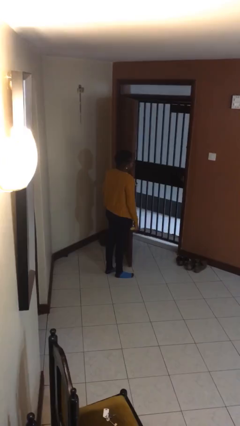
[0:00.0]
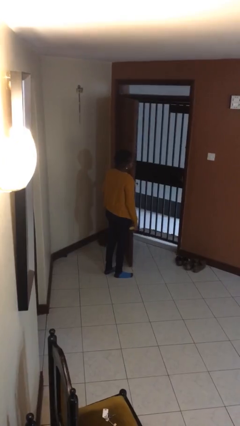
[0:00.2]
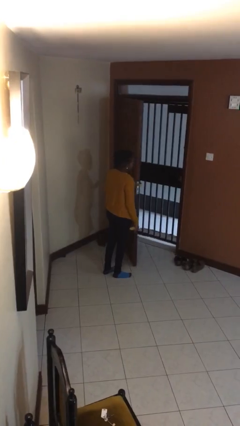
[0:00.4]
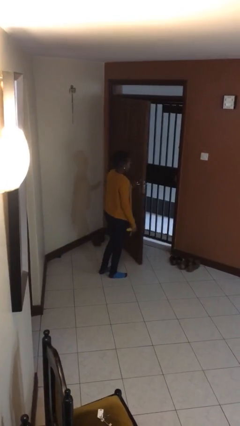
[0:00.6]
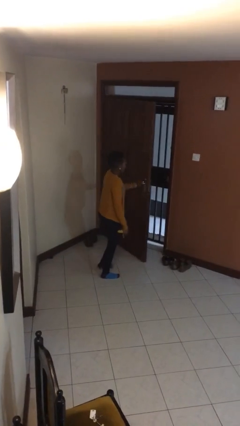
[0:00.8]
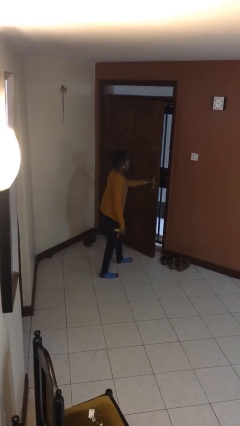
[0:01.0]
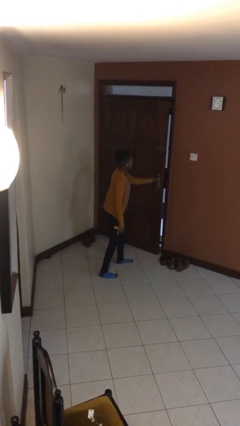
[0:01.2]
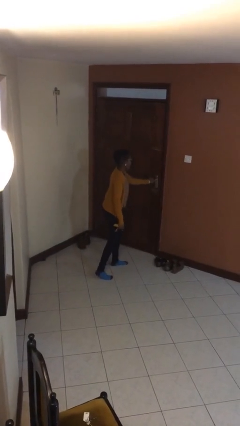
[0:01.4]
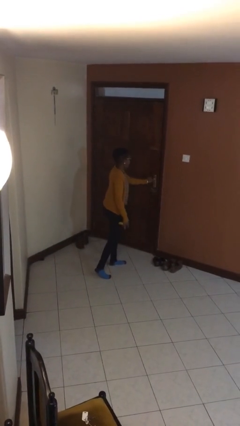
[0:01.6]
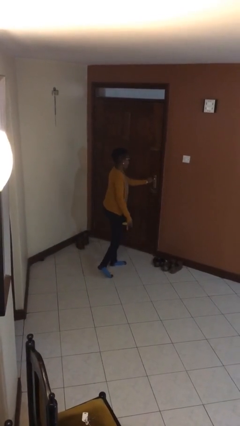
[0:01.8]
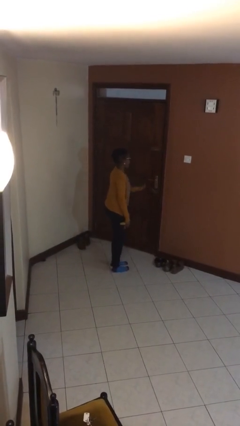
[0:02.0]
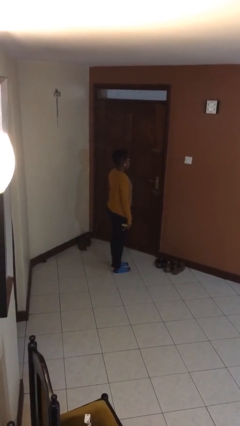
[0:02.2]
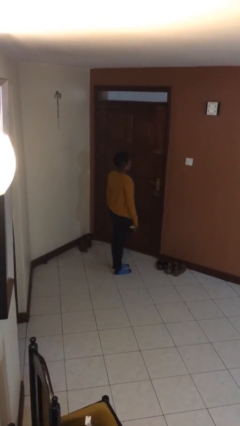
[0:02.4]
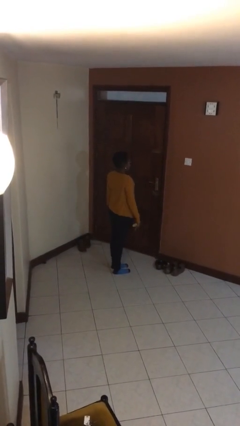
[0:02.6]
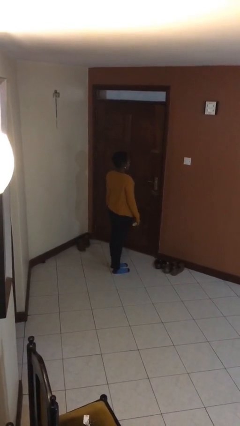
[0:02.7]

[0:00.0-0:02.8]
person closes facility door

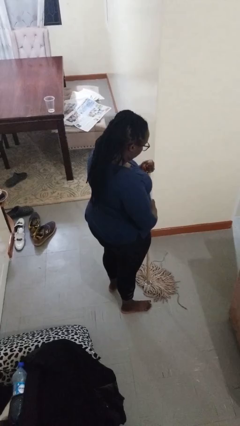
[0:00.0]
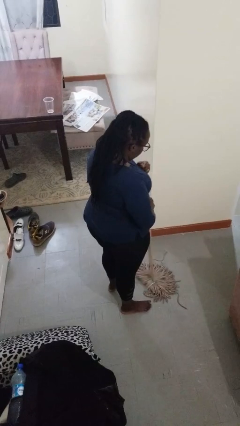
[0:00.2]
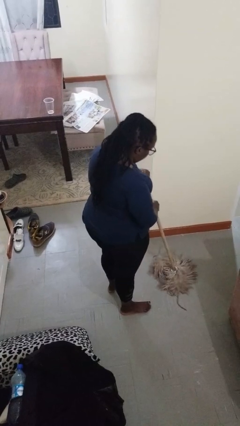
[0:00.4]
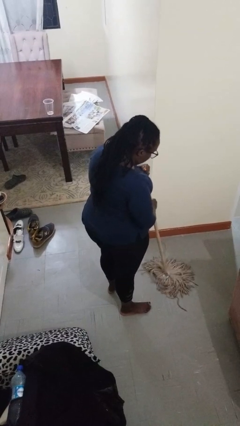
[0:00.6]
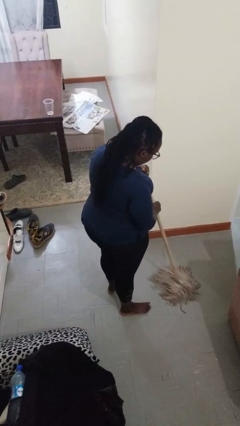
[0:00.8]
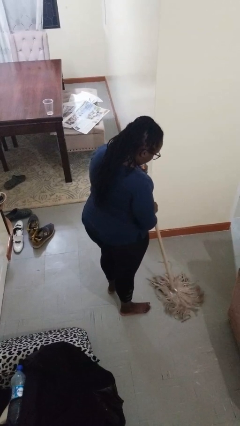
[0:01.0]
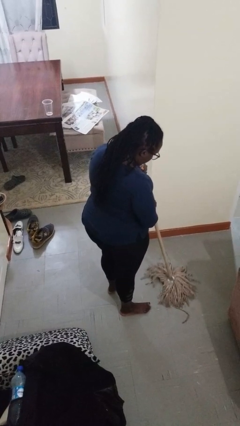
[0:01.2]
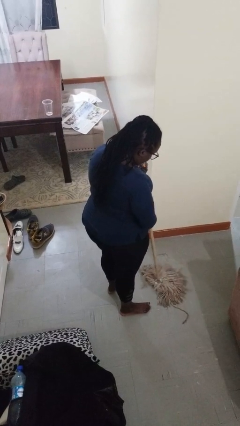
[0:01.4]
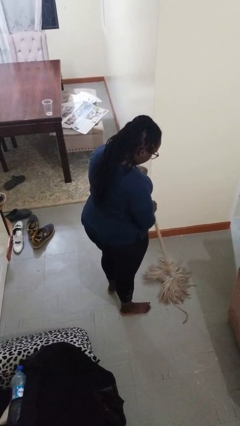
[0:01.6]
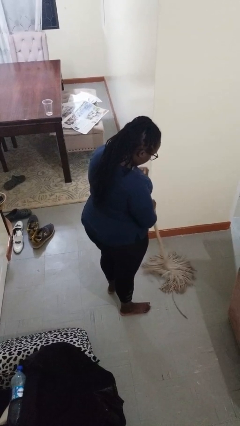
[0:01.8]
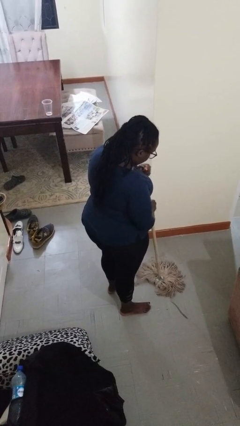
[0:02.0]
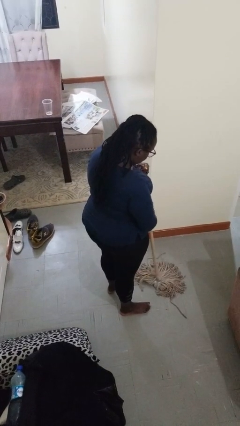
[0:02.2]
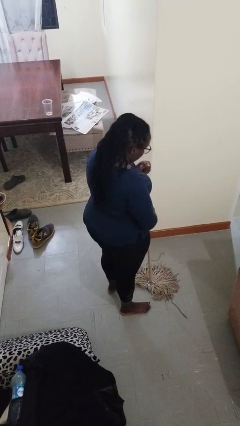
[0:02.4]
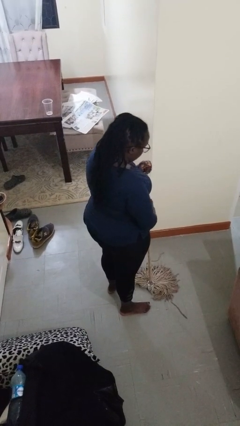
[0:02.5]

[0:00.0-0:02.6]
person mops

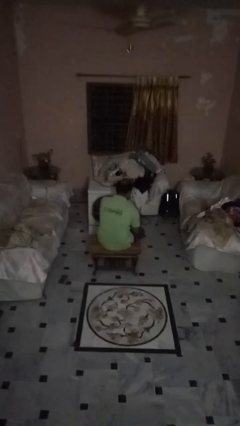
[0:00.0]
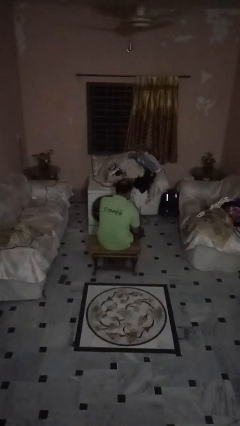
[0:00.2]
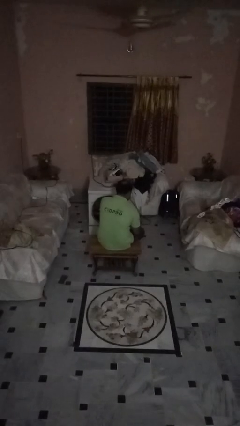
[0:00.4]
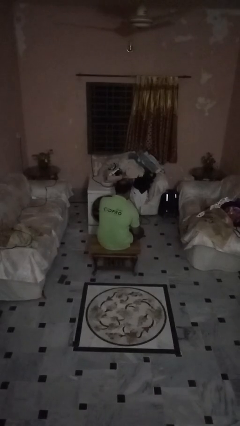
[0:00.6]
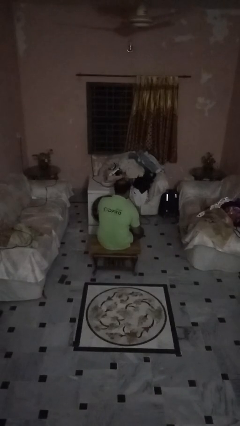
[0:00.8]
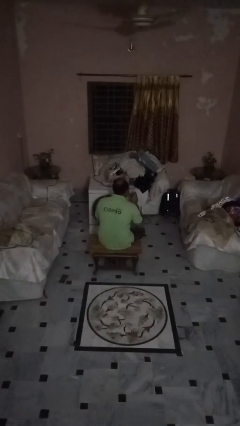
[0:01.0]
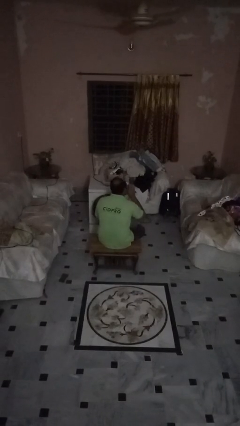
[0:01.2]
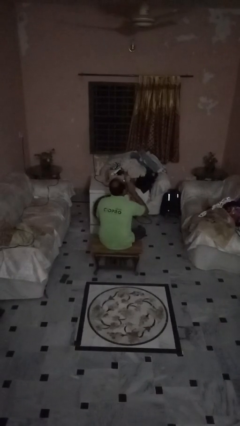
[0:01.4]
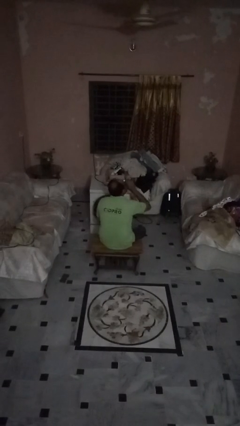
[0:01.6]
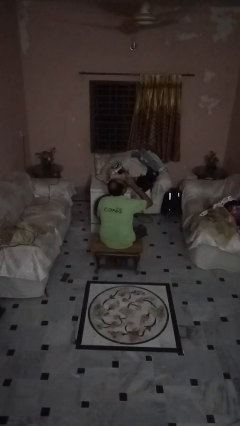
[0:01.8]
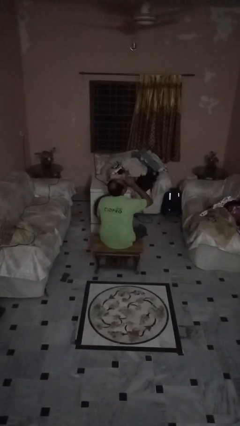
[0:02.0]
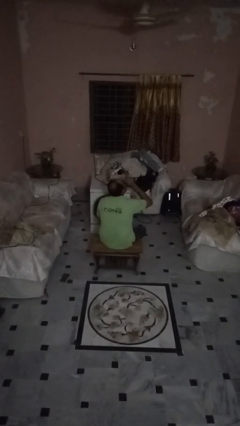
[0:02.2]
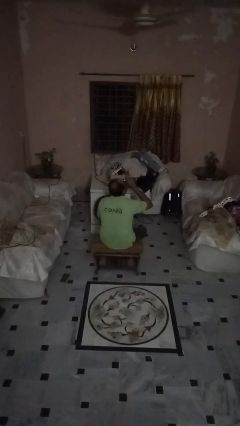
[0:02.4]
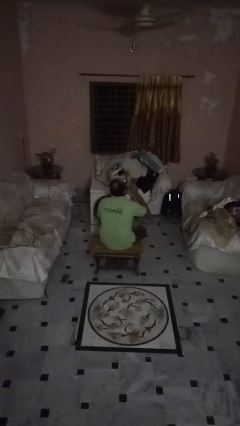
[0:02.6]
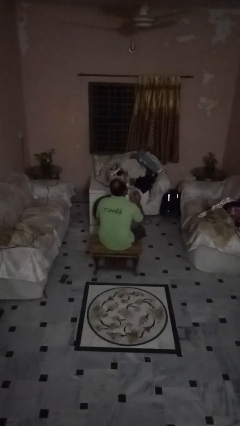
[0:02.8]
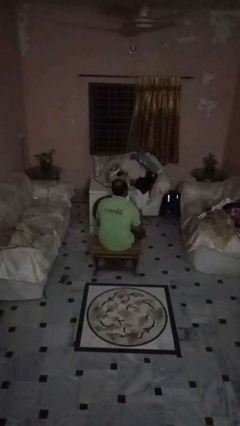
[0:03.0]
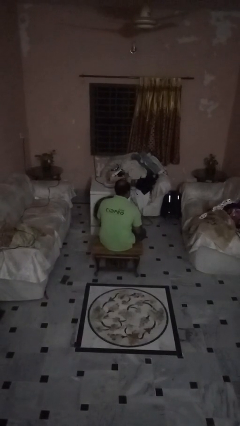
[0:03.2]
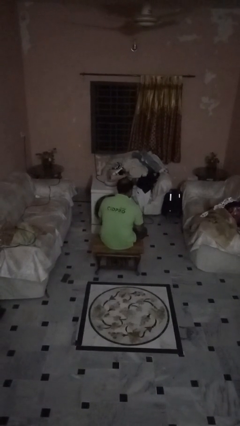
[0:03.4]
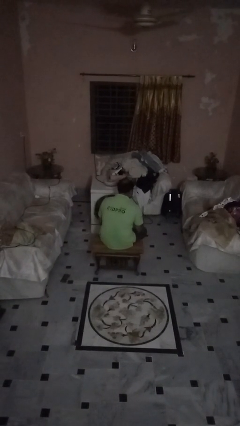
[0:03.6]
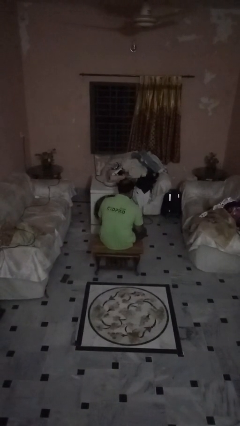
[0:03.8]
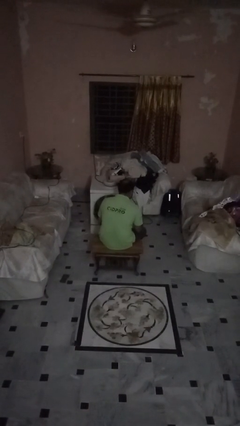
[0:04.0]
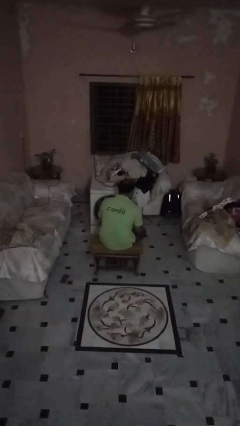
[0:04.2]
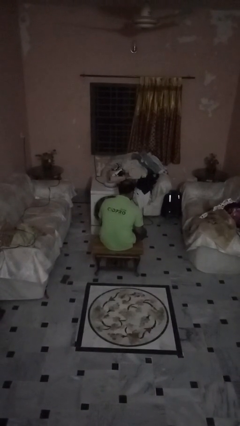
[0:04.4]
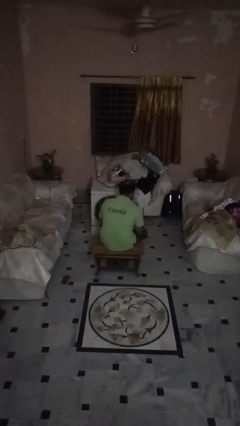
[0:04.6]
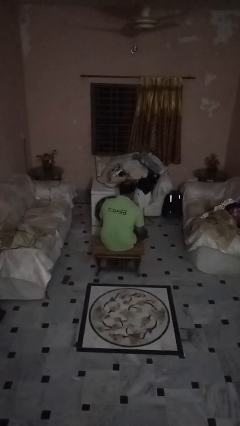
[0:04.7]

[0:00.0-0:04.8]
person drinks from beverage can

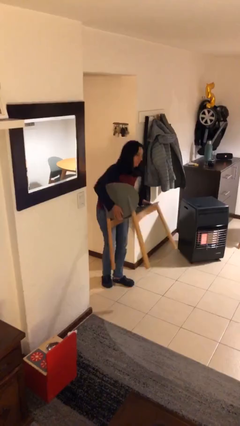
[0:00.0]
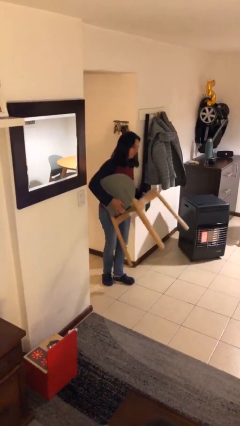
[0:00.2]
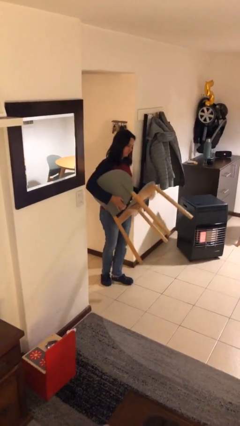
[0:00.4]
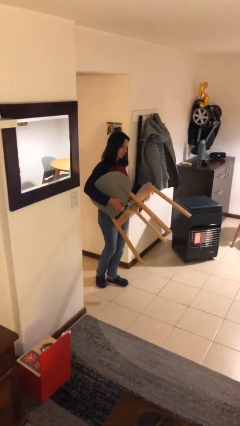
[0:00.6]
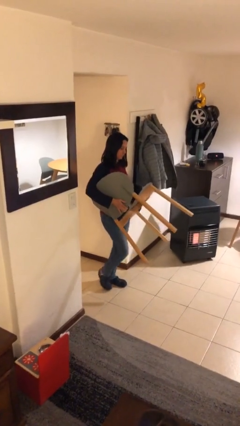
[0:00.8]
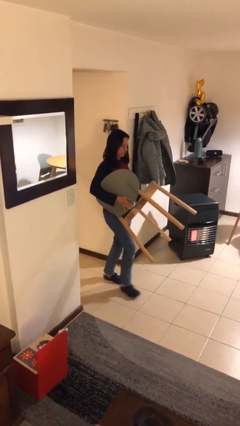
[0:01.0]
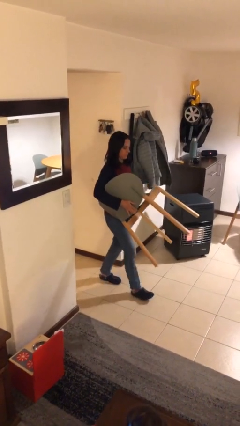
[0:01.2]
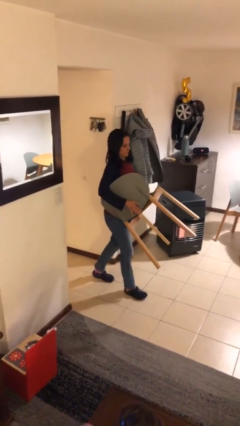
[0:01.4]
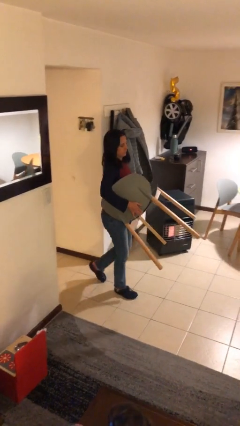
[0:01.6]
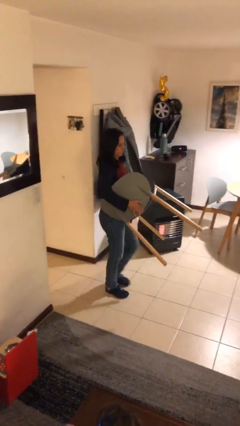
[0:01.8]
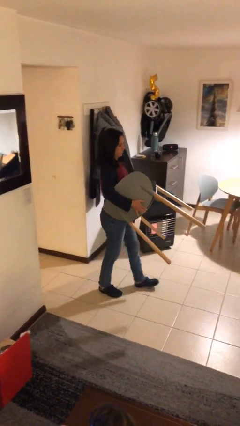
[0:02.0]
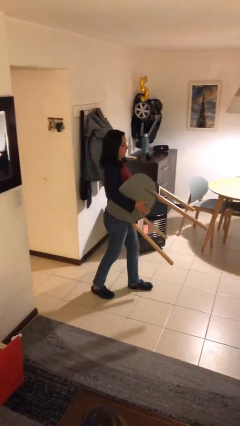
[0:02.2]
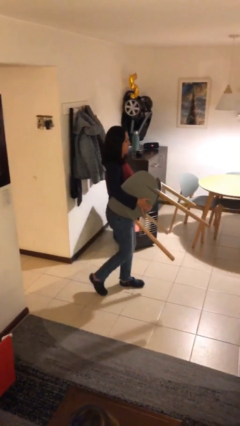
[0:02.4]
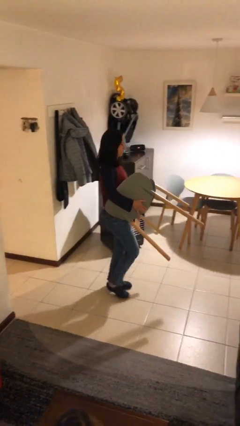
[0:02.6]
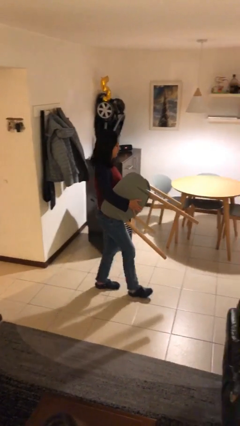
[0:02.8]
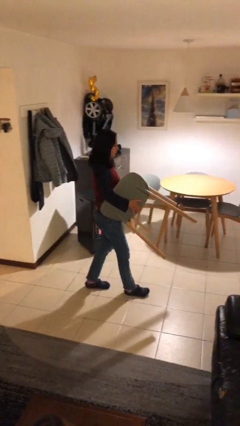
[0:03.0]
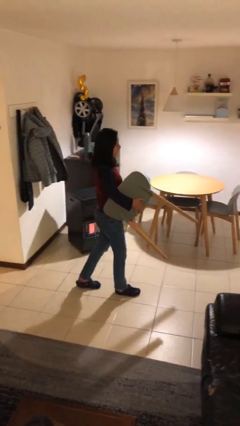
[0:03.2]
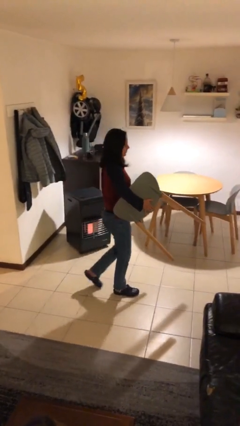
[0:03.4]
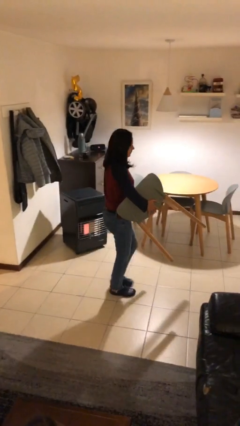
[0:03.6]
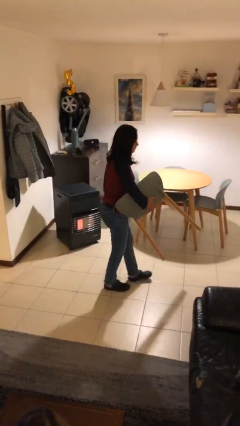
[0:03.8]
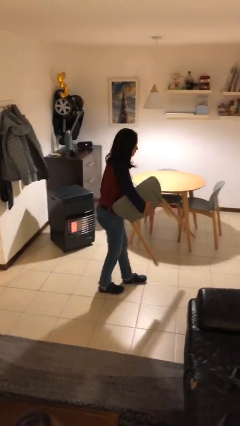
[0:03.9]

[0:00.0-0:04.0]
person carries heavy object

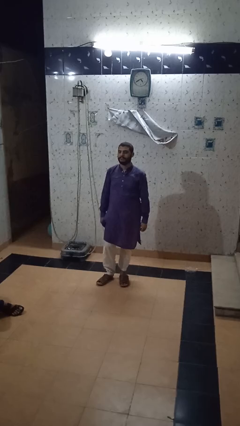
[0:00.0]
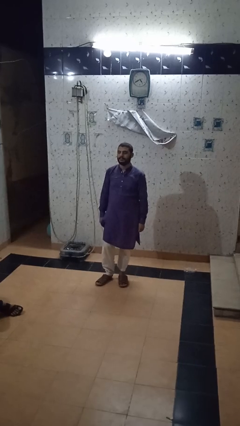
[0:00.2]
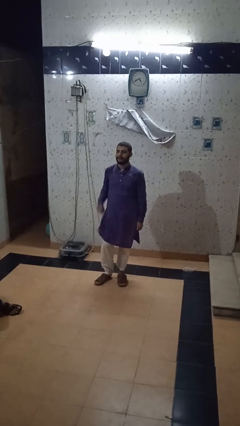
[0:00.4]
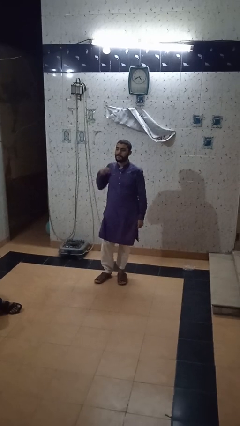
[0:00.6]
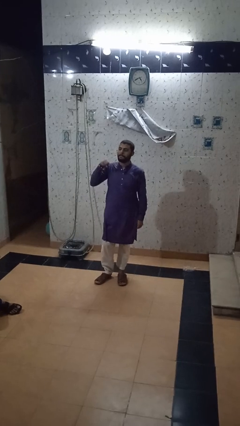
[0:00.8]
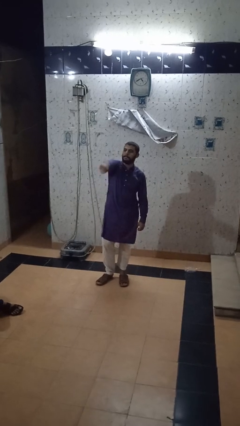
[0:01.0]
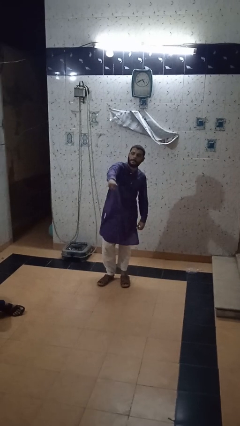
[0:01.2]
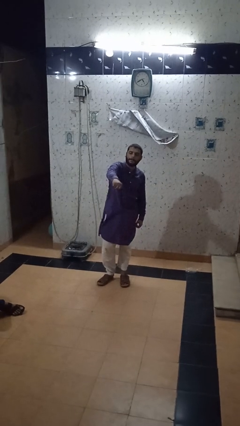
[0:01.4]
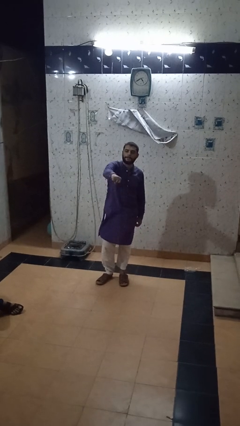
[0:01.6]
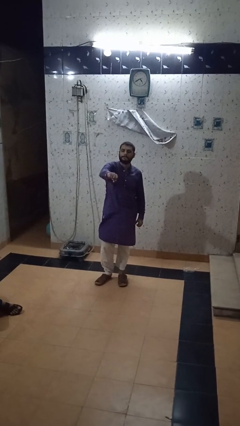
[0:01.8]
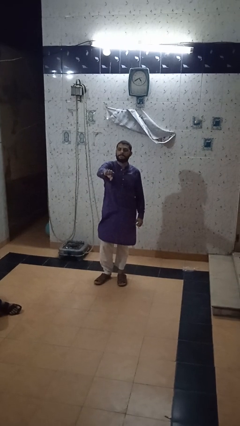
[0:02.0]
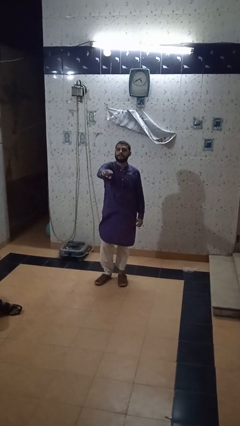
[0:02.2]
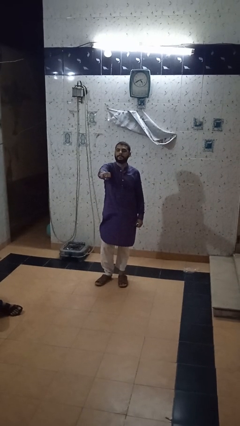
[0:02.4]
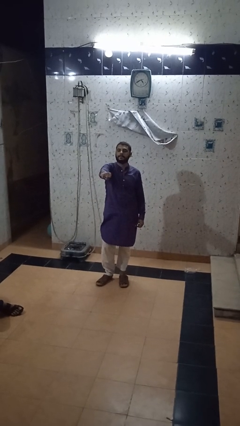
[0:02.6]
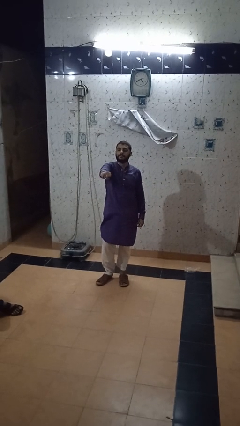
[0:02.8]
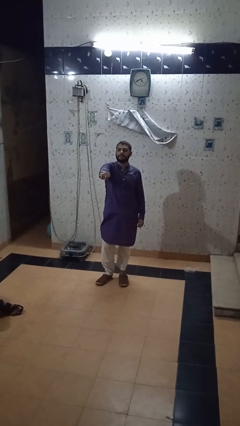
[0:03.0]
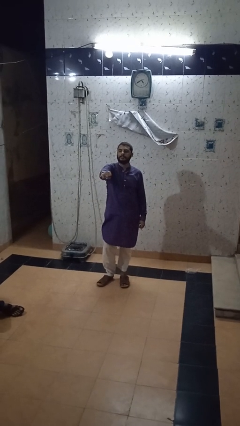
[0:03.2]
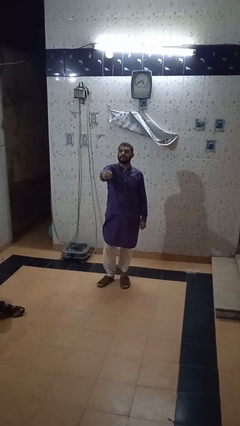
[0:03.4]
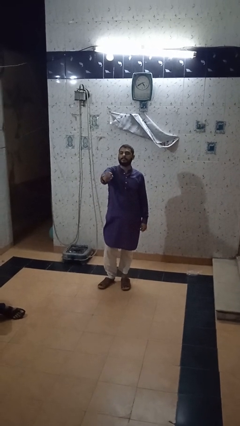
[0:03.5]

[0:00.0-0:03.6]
person punches
